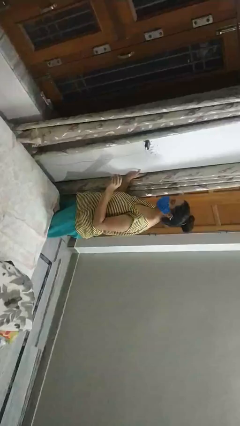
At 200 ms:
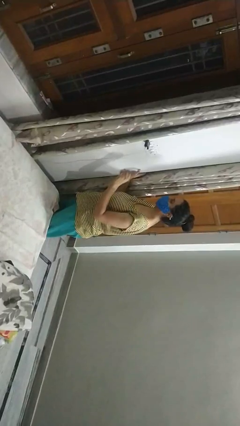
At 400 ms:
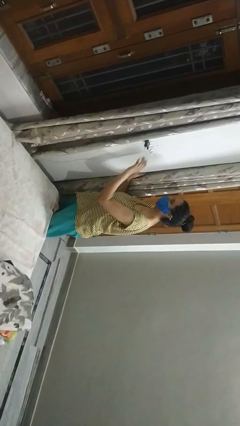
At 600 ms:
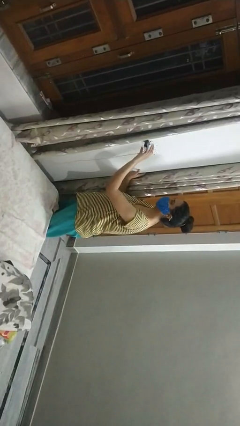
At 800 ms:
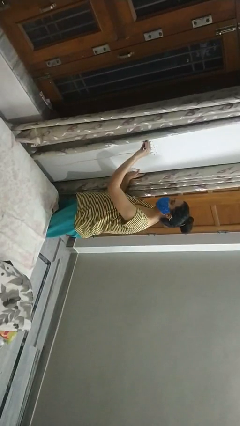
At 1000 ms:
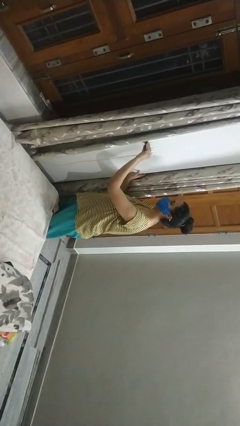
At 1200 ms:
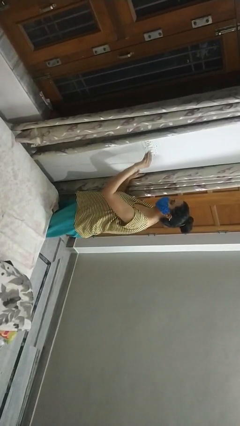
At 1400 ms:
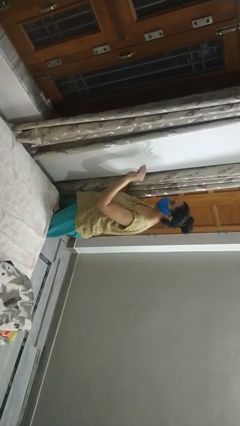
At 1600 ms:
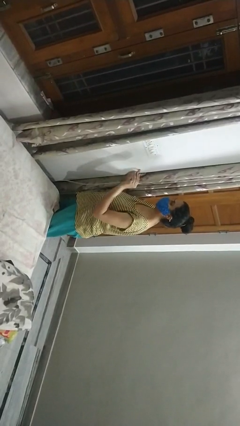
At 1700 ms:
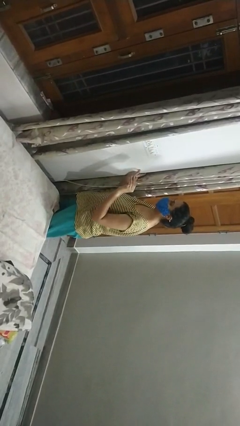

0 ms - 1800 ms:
person unplugs from electrical socket

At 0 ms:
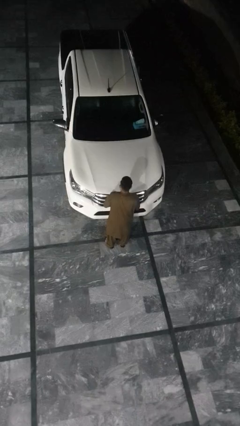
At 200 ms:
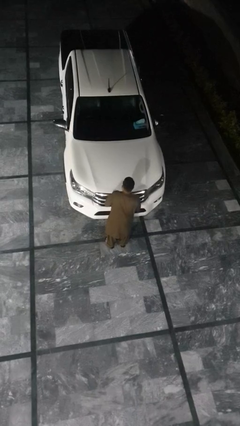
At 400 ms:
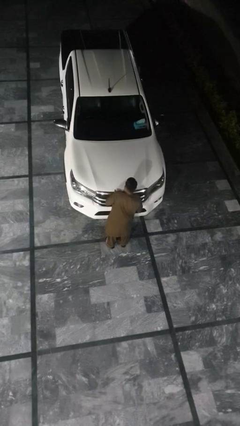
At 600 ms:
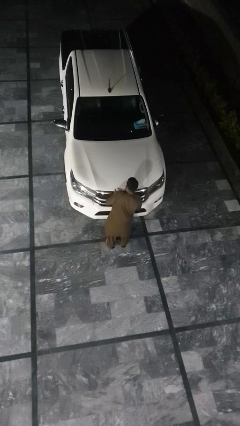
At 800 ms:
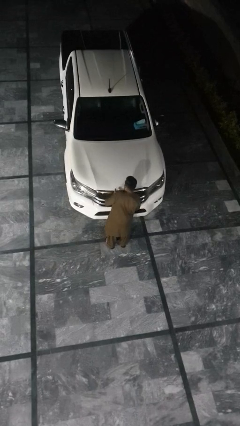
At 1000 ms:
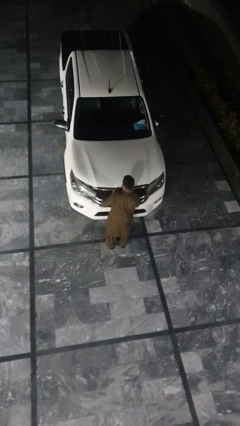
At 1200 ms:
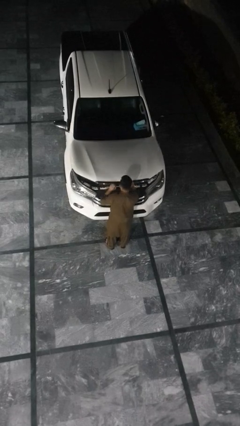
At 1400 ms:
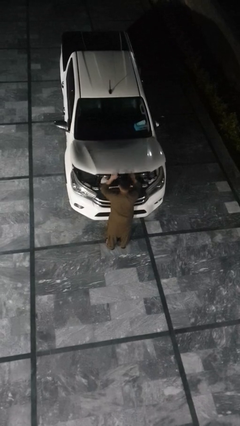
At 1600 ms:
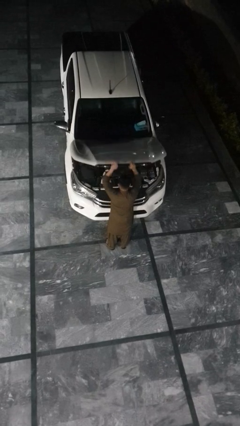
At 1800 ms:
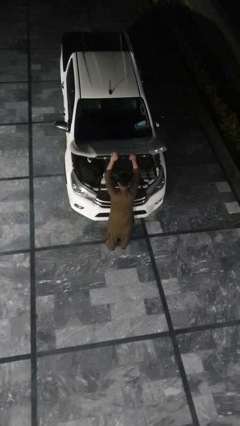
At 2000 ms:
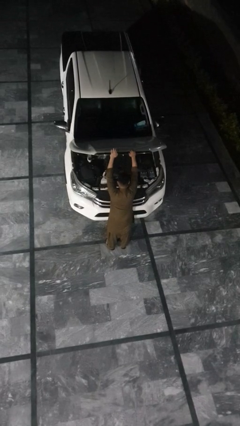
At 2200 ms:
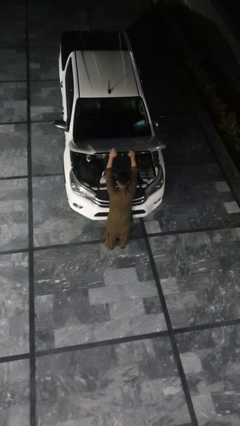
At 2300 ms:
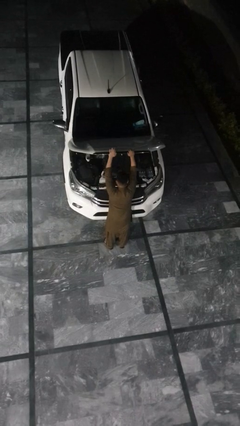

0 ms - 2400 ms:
person opens car hood

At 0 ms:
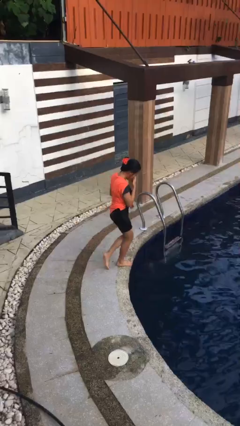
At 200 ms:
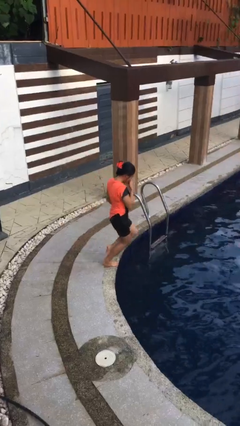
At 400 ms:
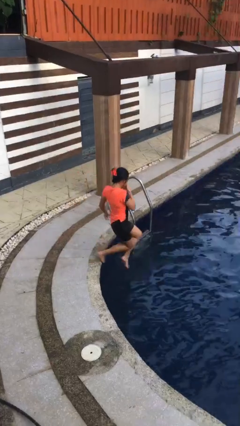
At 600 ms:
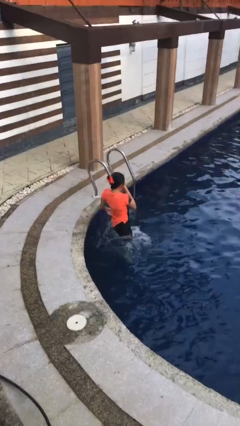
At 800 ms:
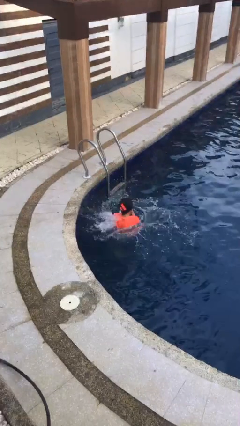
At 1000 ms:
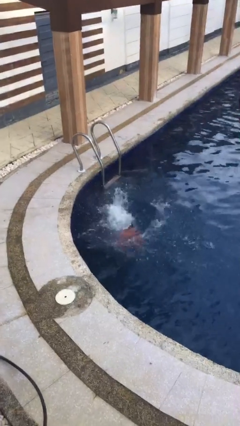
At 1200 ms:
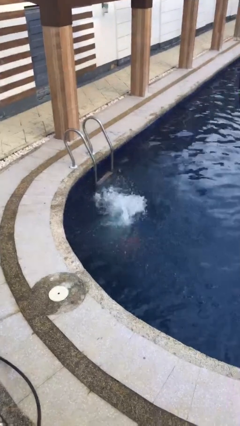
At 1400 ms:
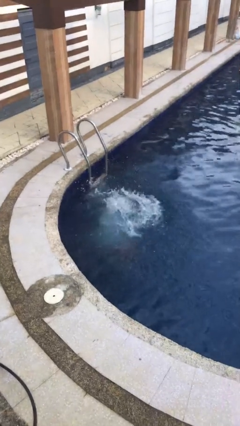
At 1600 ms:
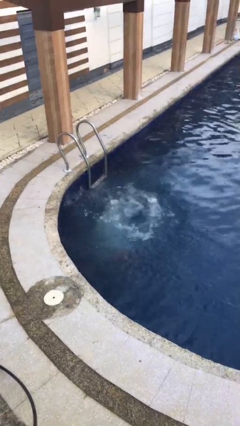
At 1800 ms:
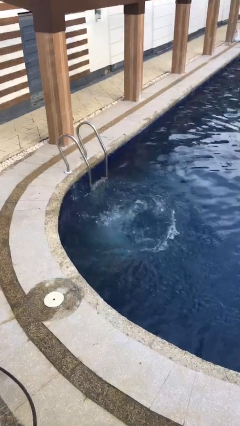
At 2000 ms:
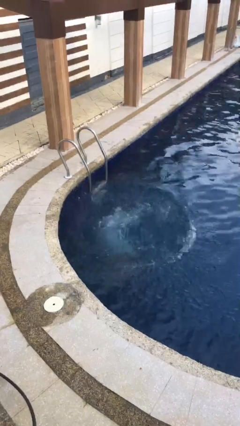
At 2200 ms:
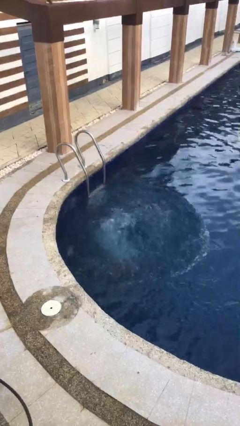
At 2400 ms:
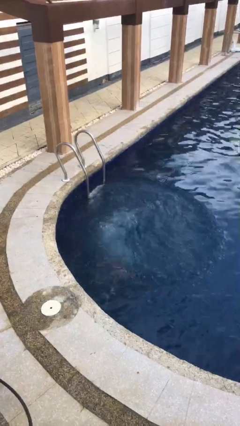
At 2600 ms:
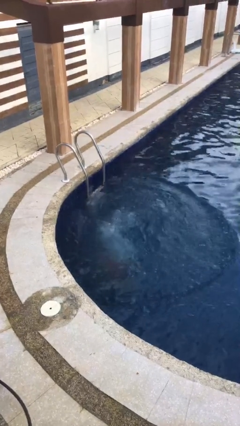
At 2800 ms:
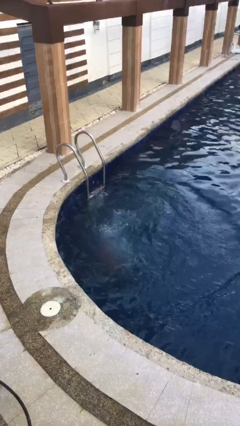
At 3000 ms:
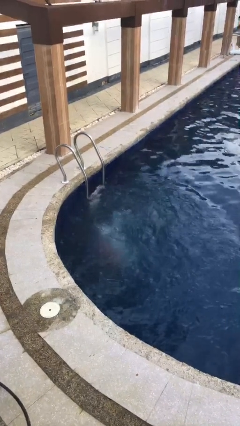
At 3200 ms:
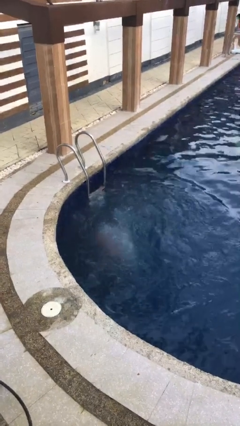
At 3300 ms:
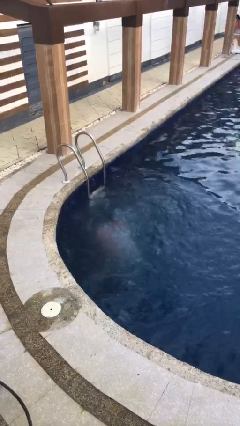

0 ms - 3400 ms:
person falls into pool

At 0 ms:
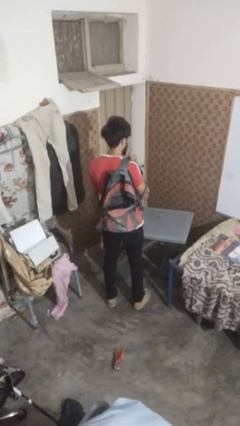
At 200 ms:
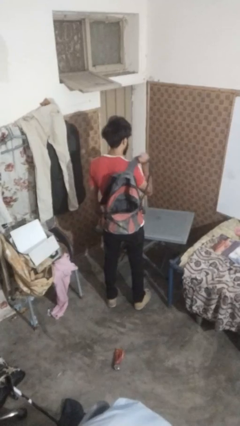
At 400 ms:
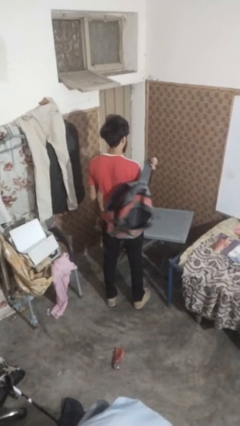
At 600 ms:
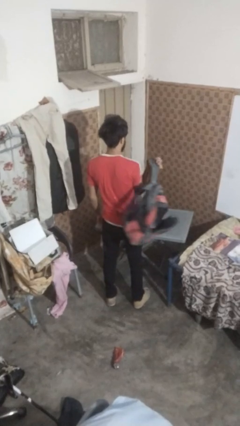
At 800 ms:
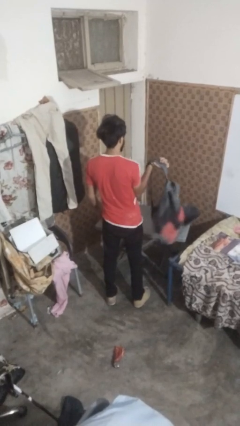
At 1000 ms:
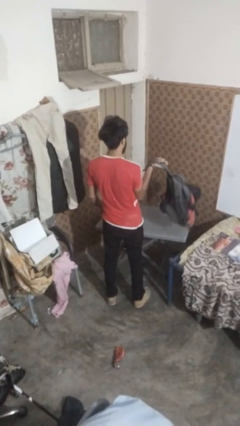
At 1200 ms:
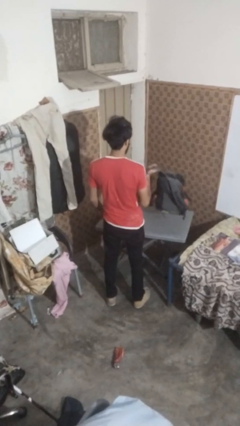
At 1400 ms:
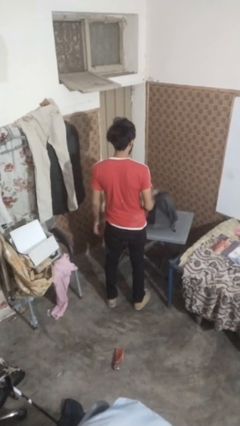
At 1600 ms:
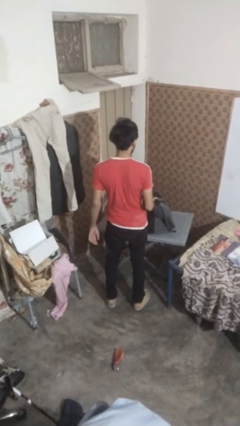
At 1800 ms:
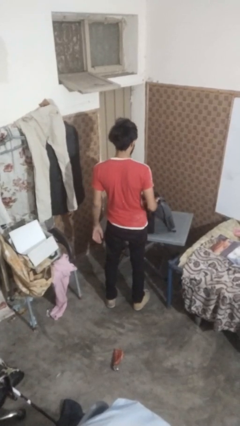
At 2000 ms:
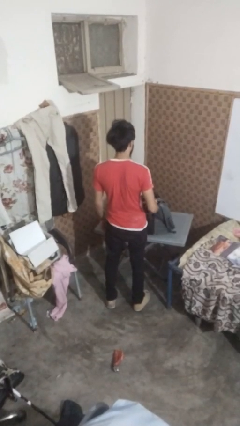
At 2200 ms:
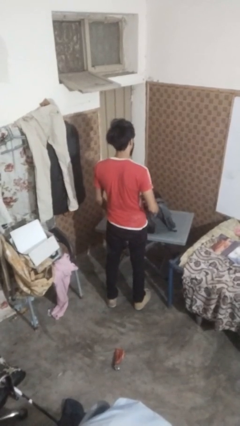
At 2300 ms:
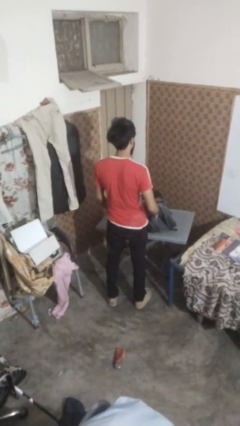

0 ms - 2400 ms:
person takes off backpack

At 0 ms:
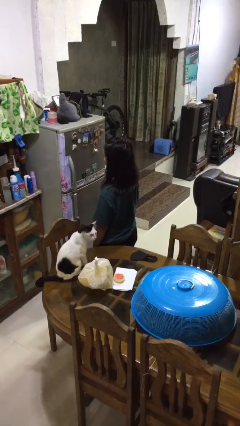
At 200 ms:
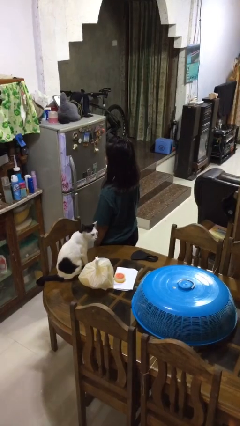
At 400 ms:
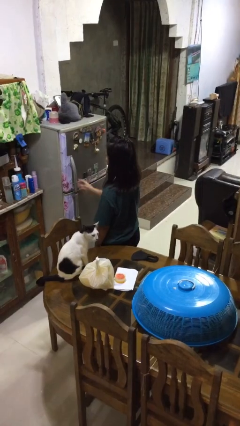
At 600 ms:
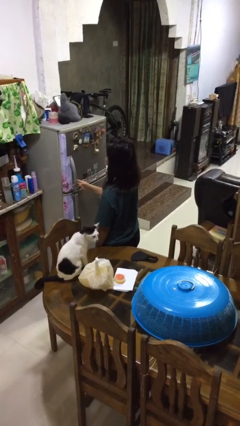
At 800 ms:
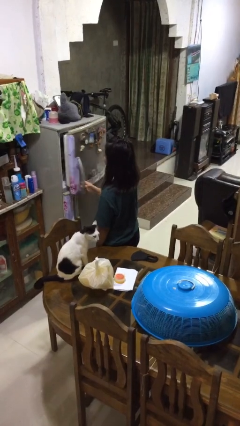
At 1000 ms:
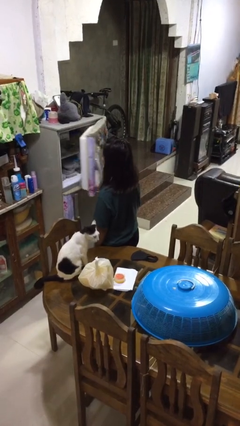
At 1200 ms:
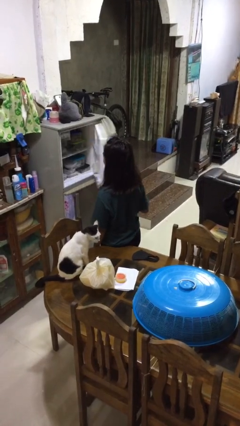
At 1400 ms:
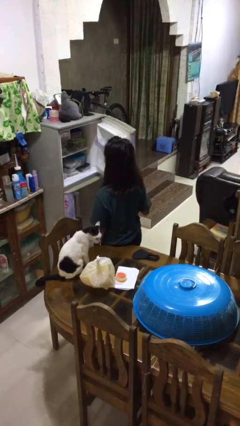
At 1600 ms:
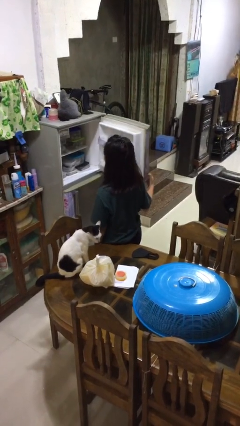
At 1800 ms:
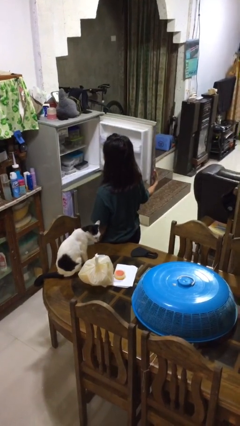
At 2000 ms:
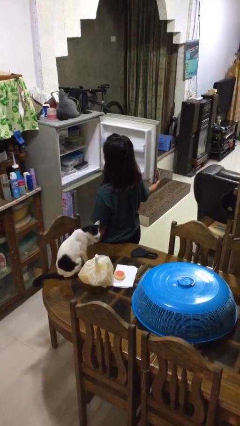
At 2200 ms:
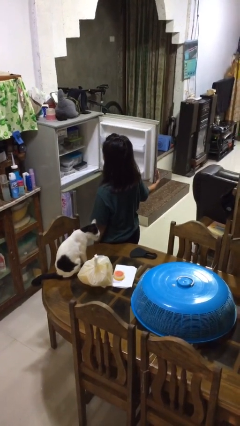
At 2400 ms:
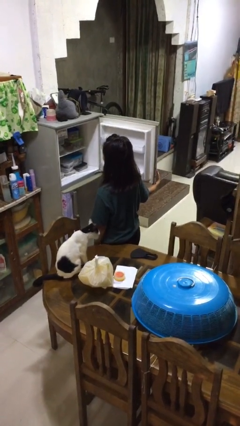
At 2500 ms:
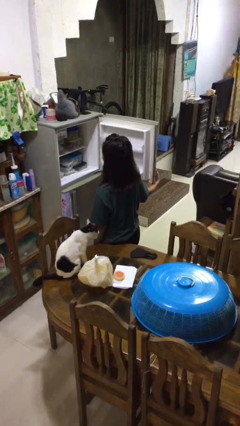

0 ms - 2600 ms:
person opens refrigerator

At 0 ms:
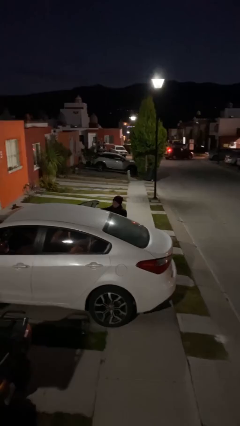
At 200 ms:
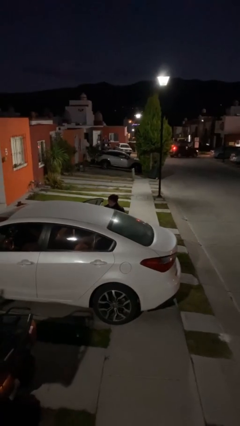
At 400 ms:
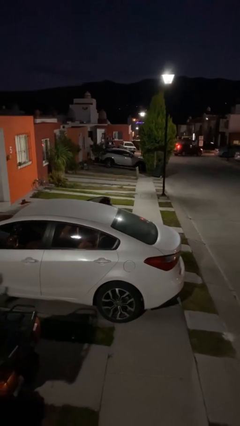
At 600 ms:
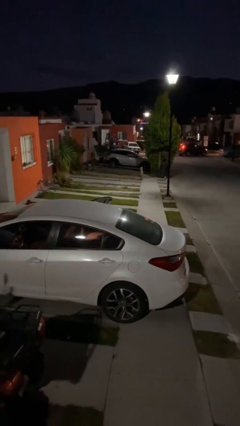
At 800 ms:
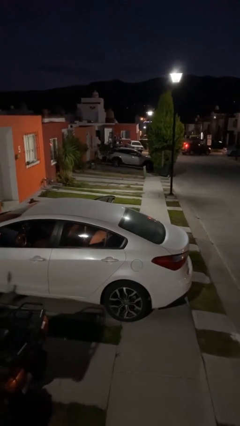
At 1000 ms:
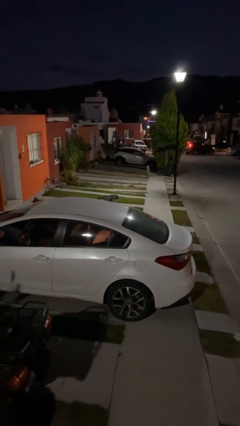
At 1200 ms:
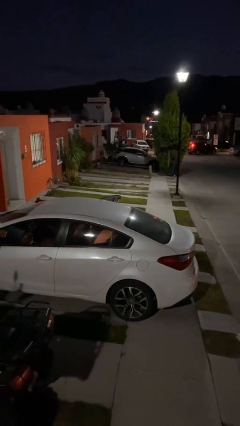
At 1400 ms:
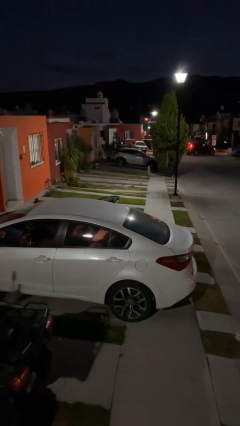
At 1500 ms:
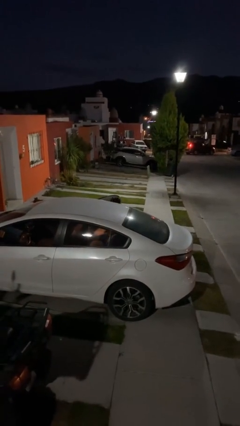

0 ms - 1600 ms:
person loads car

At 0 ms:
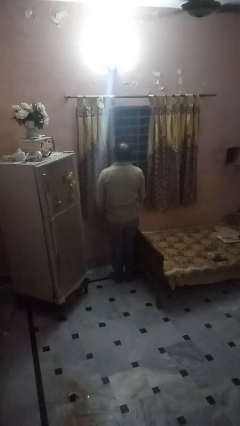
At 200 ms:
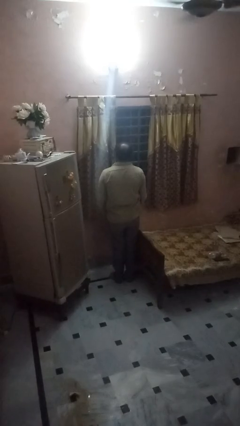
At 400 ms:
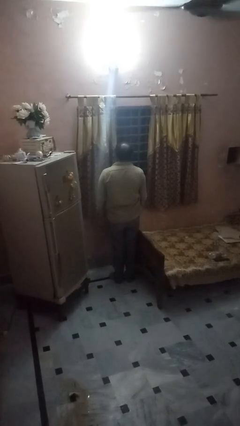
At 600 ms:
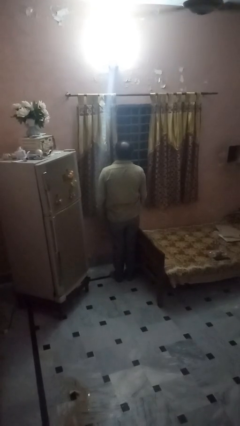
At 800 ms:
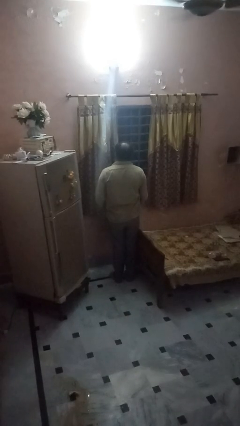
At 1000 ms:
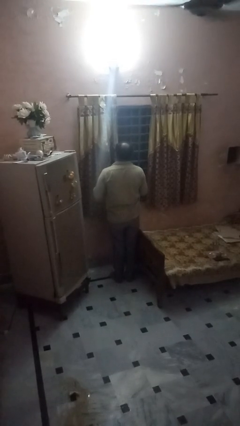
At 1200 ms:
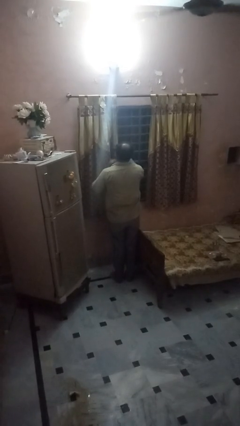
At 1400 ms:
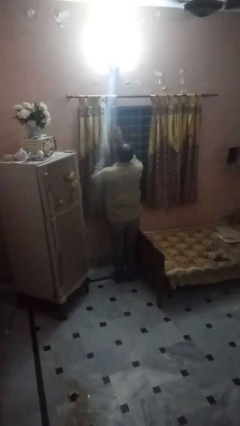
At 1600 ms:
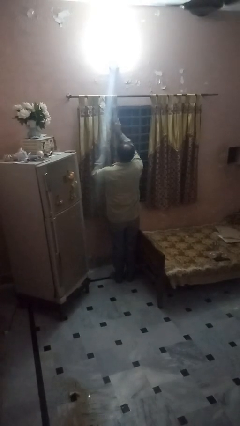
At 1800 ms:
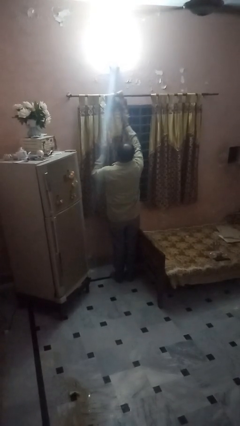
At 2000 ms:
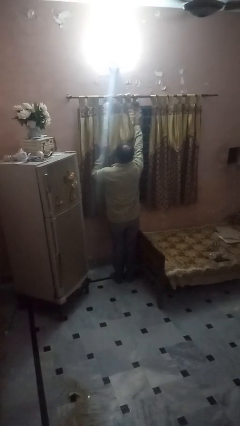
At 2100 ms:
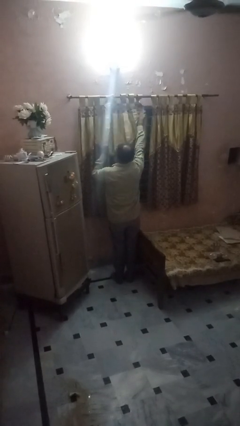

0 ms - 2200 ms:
person closes curtains

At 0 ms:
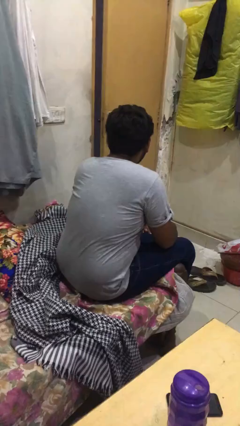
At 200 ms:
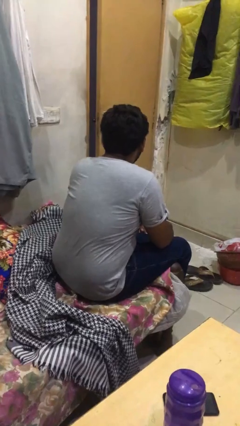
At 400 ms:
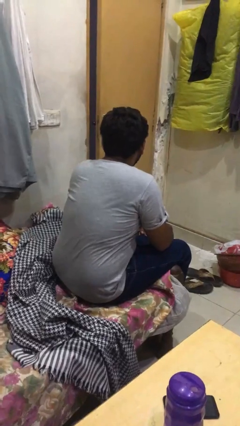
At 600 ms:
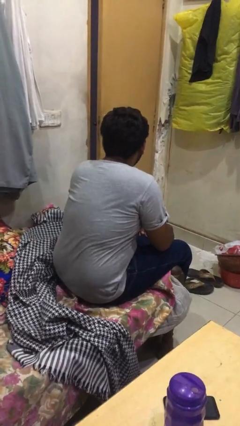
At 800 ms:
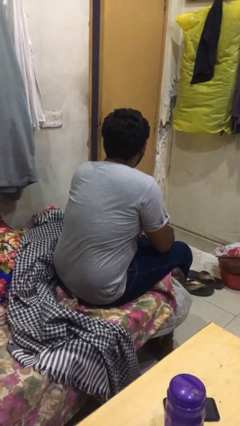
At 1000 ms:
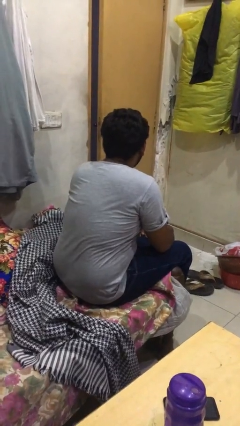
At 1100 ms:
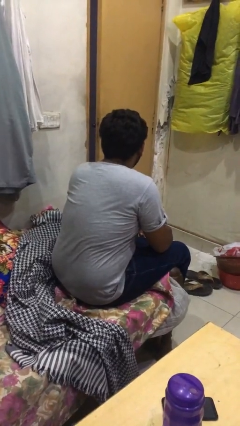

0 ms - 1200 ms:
person covers with blanket
